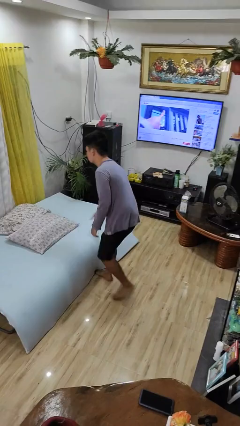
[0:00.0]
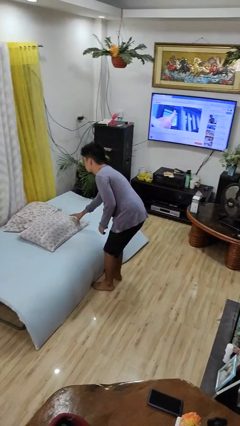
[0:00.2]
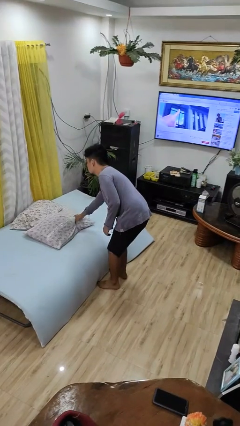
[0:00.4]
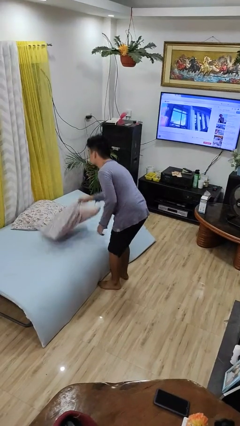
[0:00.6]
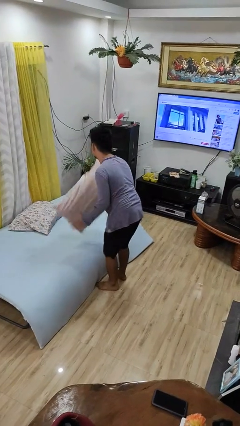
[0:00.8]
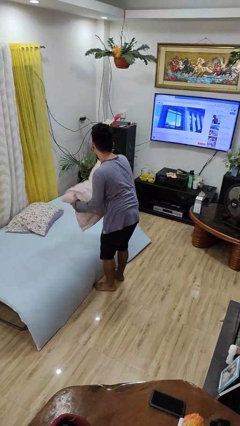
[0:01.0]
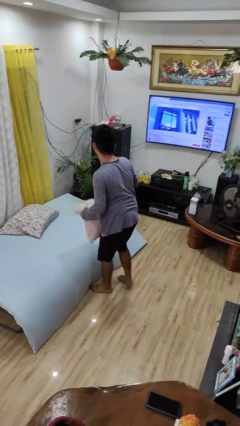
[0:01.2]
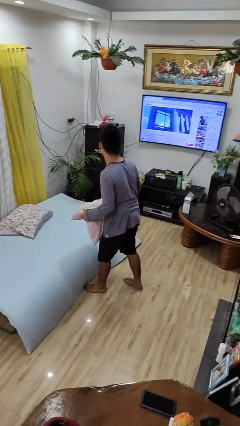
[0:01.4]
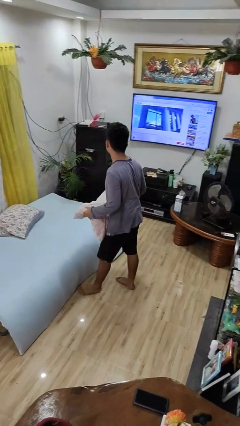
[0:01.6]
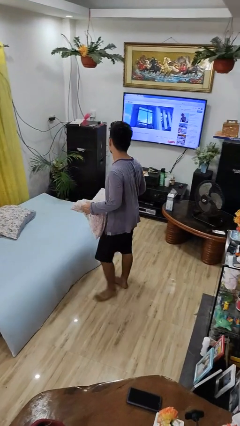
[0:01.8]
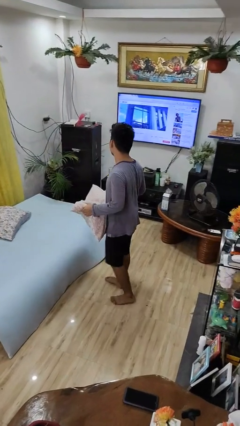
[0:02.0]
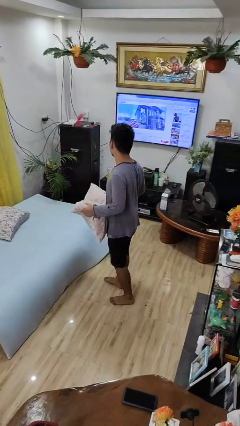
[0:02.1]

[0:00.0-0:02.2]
person picks up object from bed

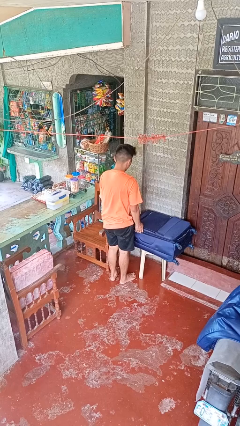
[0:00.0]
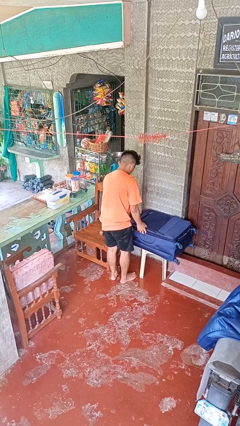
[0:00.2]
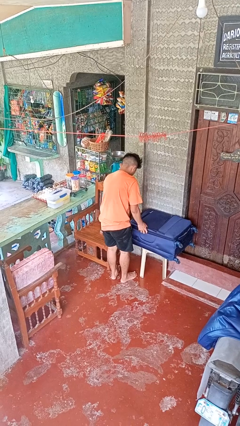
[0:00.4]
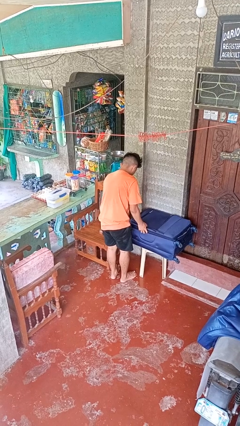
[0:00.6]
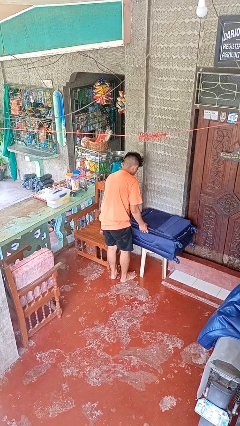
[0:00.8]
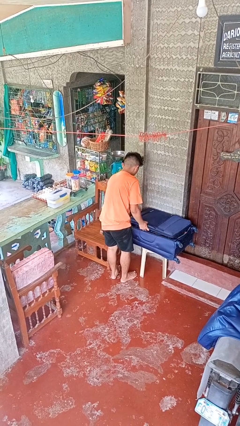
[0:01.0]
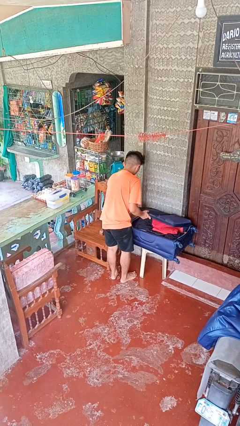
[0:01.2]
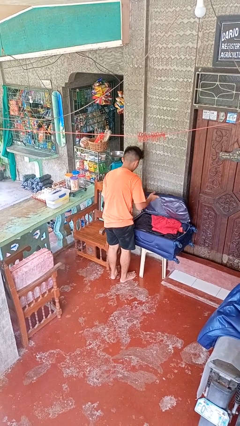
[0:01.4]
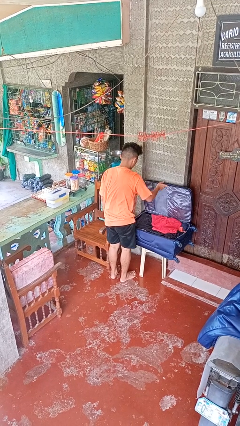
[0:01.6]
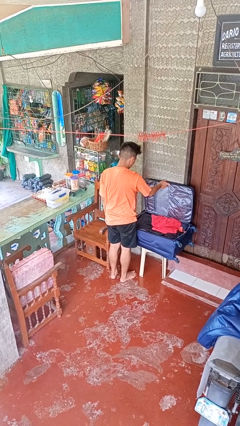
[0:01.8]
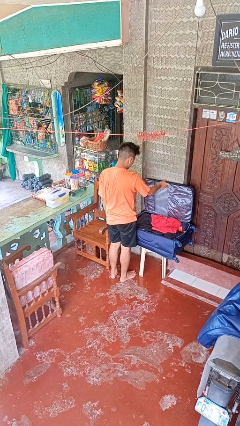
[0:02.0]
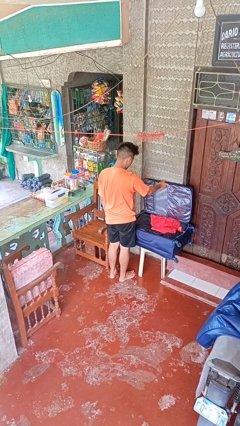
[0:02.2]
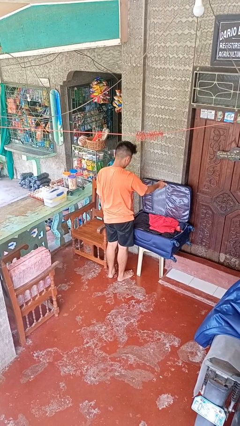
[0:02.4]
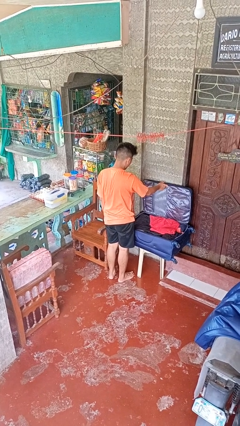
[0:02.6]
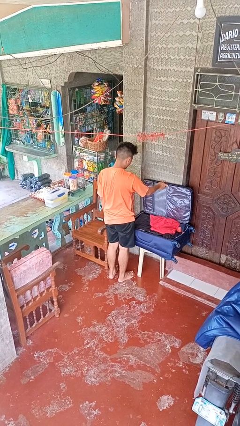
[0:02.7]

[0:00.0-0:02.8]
person opens suitcase

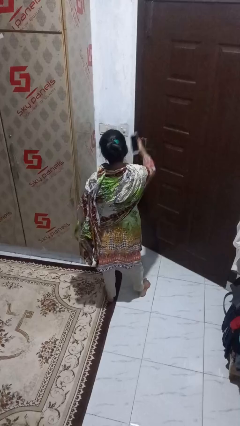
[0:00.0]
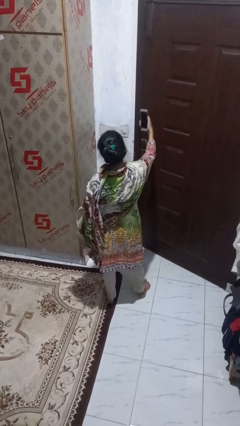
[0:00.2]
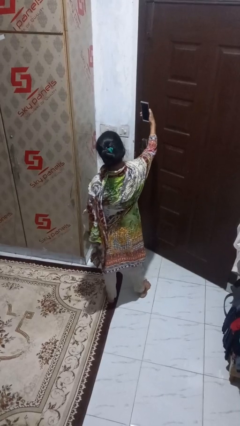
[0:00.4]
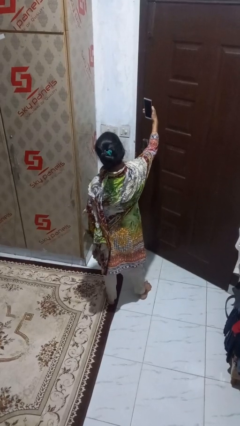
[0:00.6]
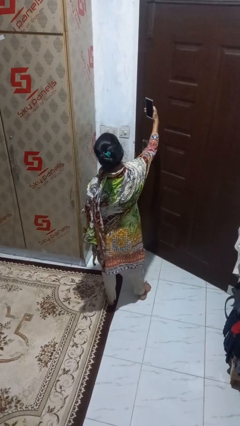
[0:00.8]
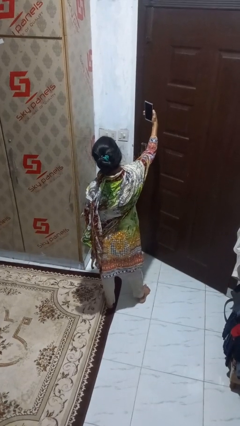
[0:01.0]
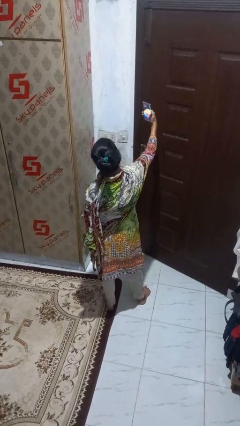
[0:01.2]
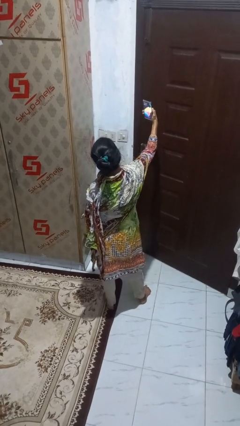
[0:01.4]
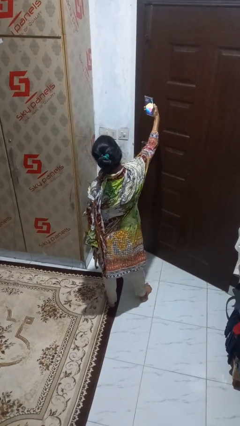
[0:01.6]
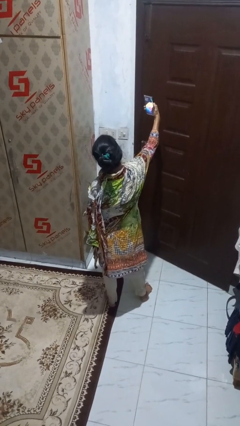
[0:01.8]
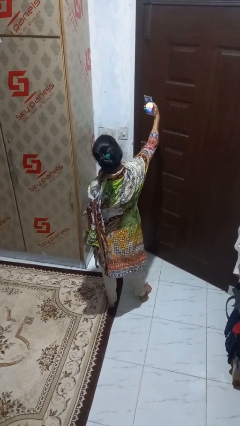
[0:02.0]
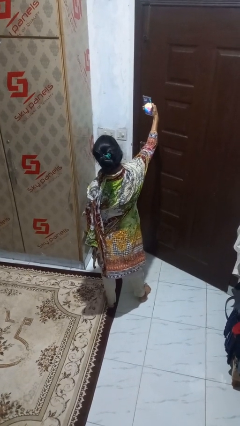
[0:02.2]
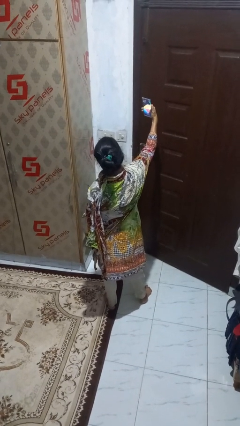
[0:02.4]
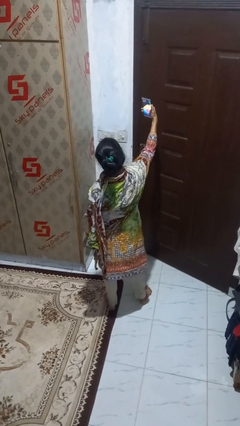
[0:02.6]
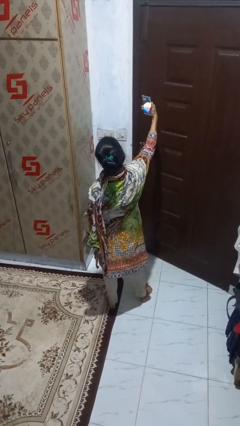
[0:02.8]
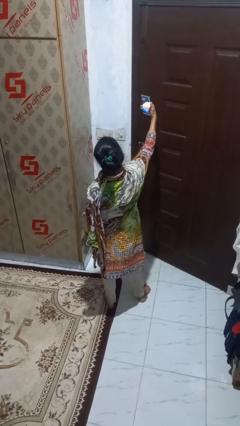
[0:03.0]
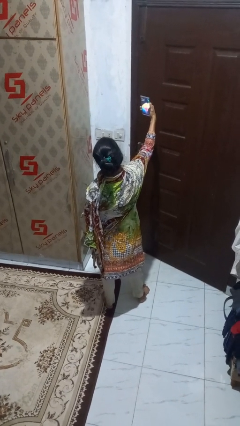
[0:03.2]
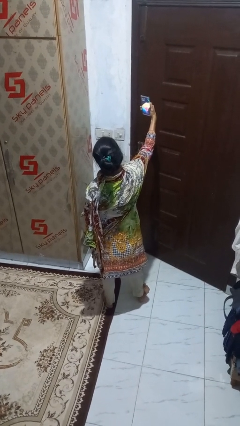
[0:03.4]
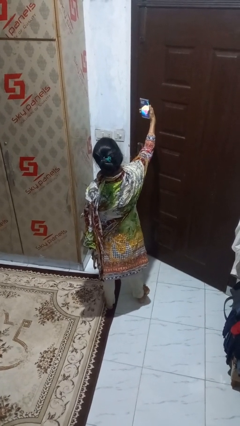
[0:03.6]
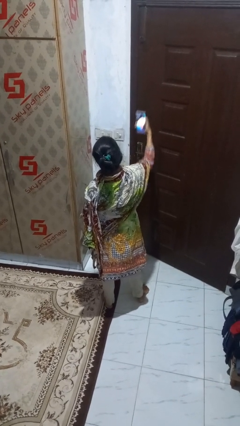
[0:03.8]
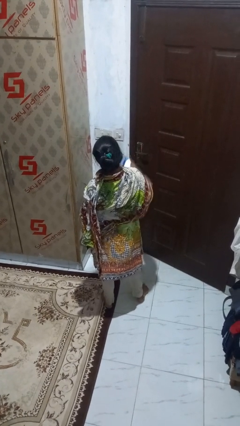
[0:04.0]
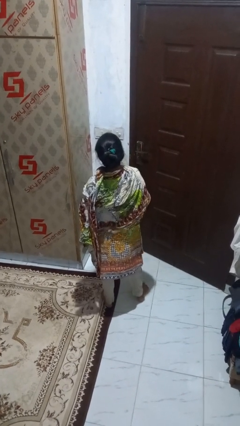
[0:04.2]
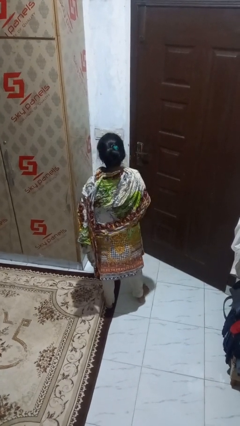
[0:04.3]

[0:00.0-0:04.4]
person takes selfie

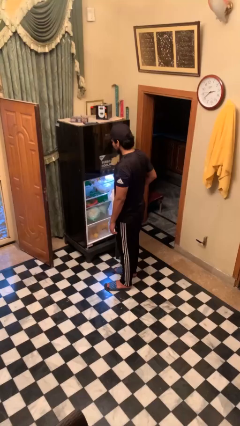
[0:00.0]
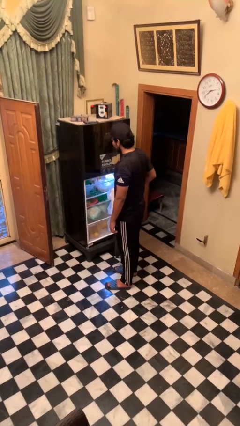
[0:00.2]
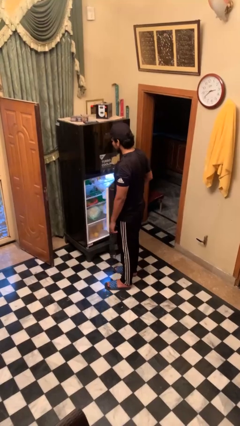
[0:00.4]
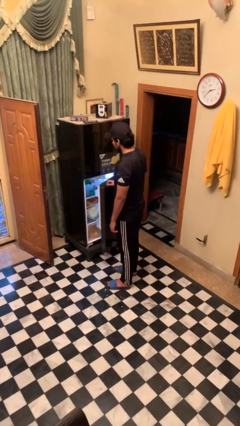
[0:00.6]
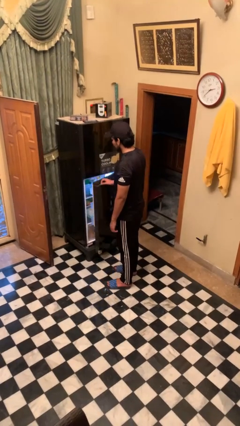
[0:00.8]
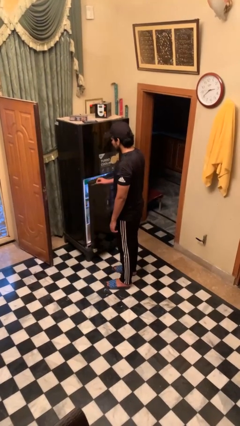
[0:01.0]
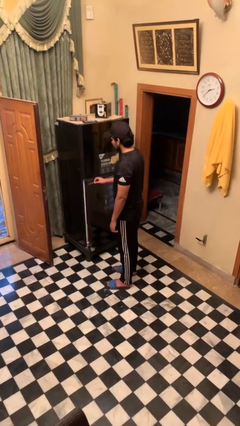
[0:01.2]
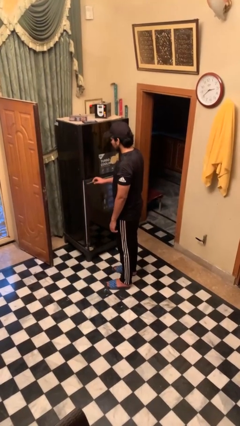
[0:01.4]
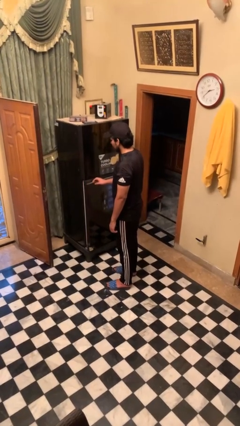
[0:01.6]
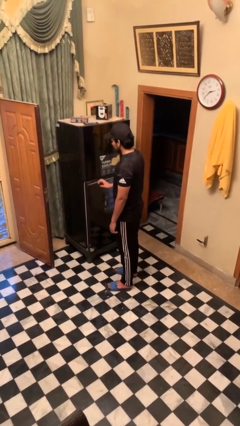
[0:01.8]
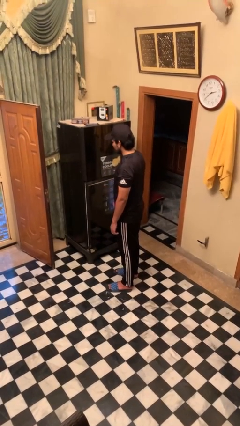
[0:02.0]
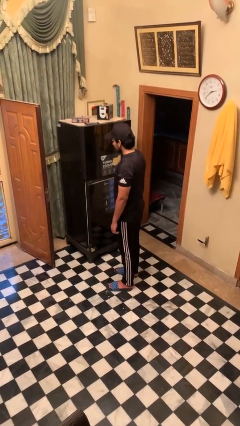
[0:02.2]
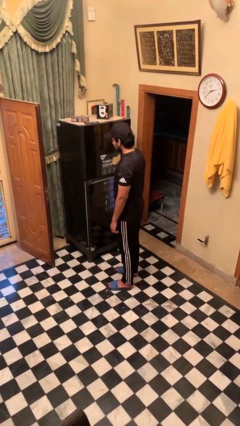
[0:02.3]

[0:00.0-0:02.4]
person closes refrigerator

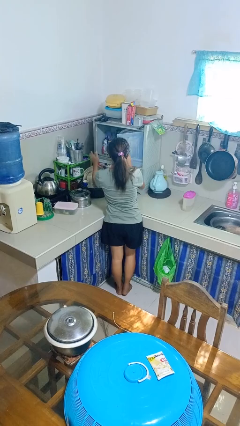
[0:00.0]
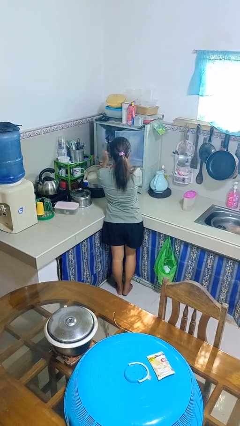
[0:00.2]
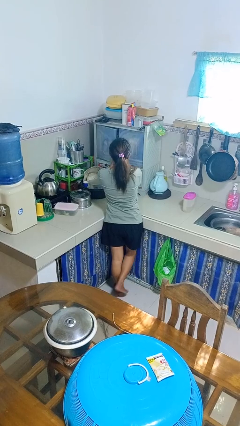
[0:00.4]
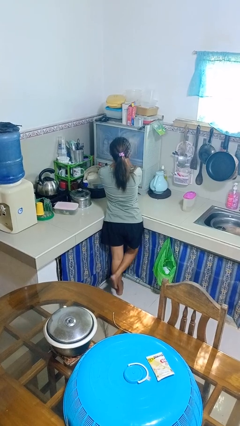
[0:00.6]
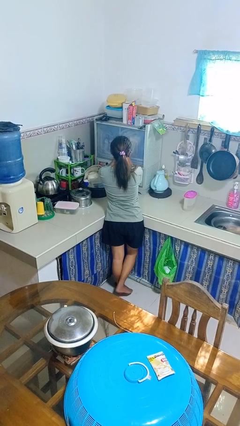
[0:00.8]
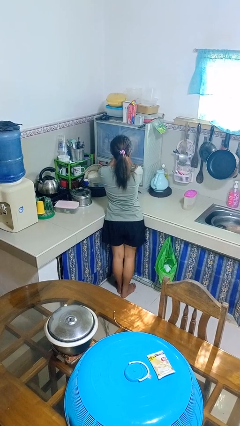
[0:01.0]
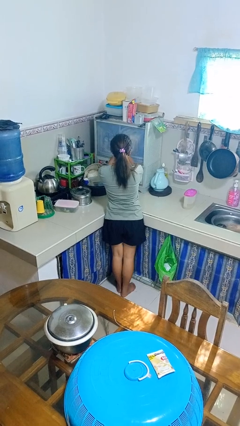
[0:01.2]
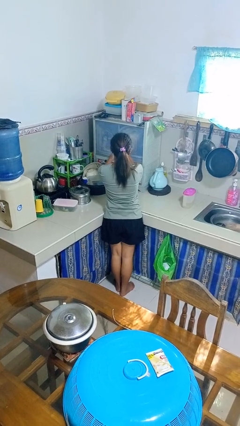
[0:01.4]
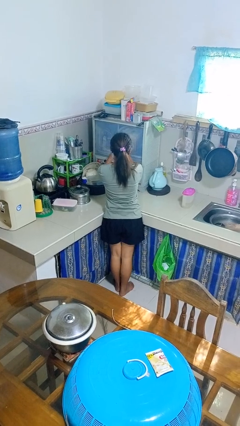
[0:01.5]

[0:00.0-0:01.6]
person closes kitchen drawer

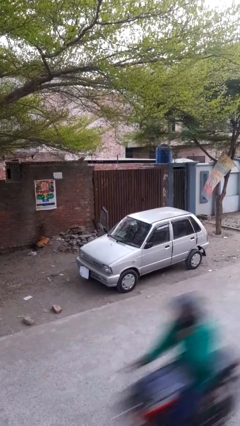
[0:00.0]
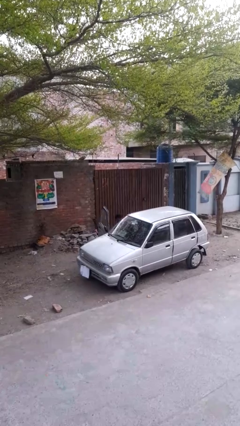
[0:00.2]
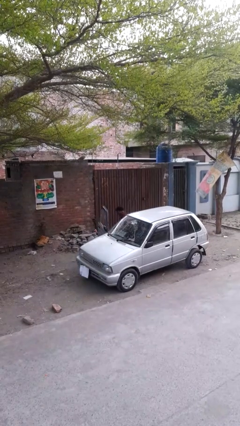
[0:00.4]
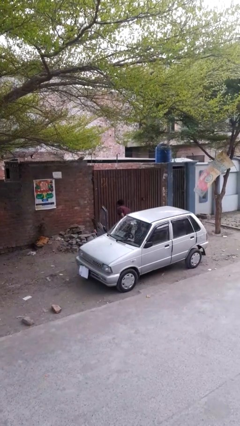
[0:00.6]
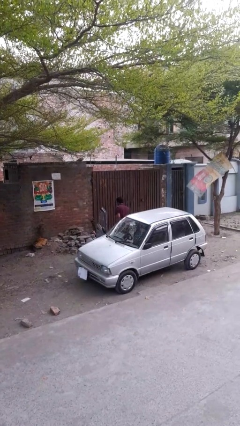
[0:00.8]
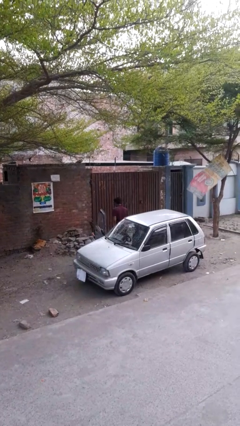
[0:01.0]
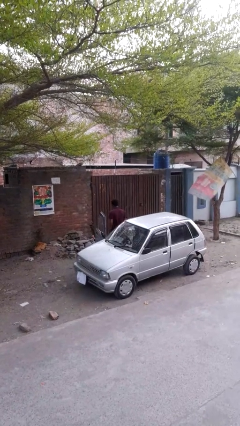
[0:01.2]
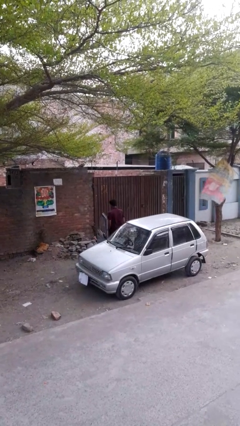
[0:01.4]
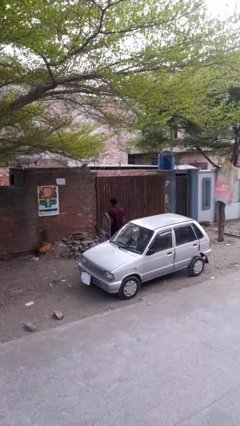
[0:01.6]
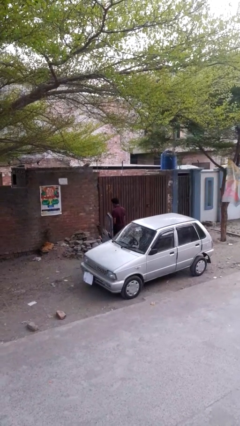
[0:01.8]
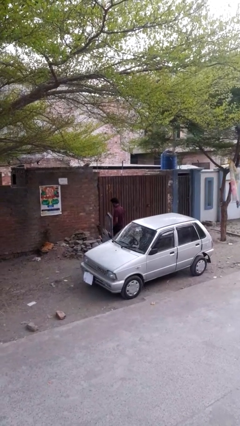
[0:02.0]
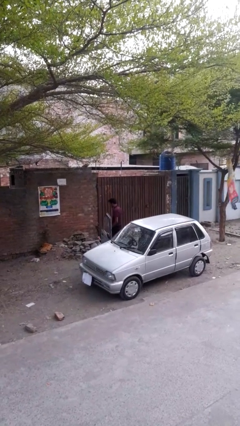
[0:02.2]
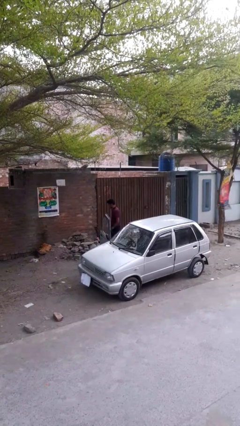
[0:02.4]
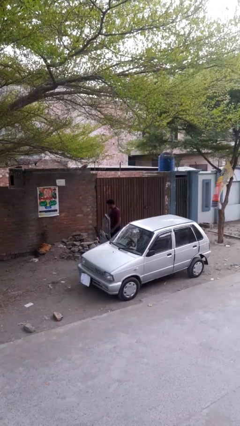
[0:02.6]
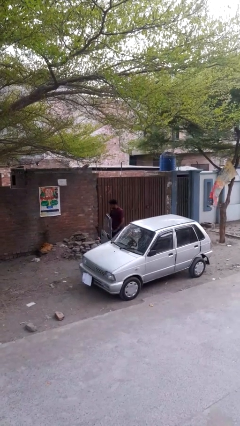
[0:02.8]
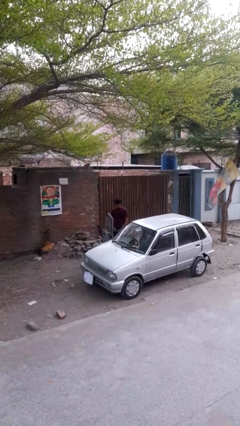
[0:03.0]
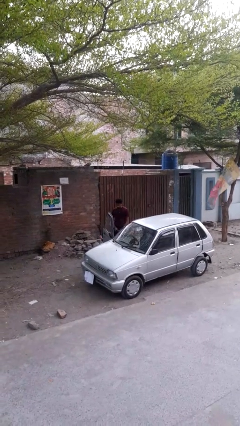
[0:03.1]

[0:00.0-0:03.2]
person exits car

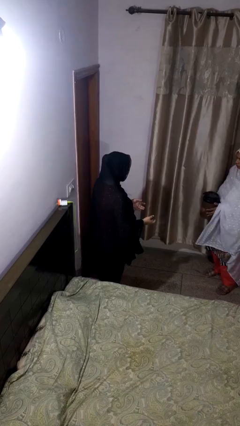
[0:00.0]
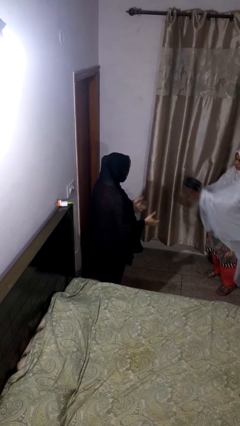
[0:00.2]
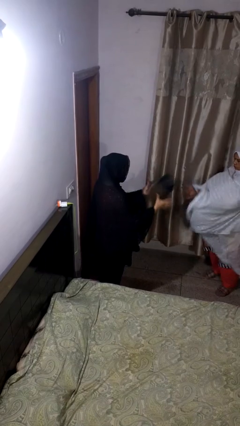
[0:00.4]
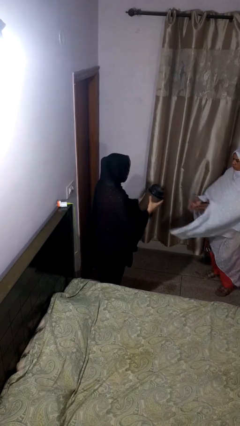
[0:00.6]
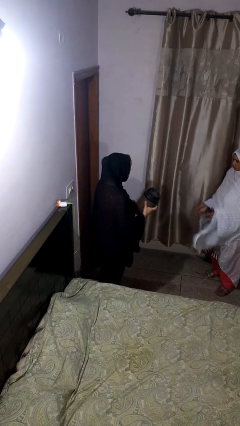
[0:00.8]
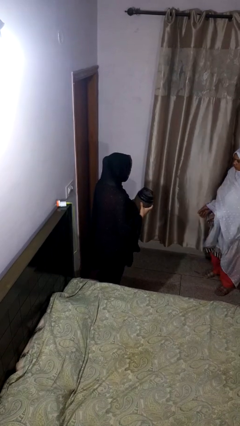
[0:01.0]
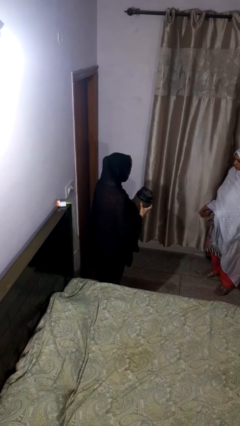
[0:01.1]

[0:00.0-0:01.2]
person catches object from person
